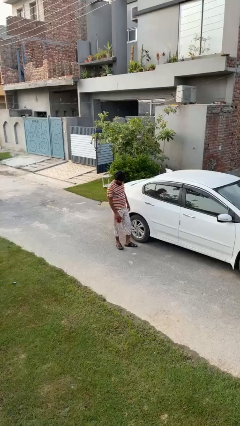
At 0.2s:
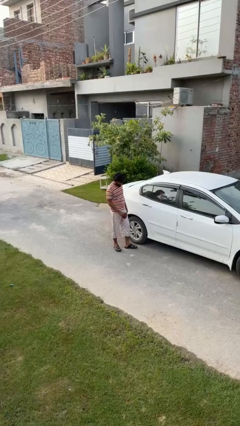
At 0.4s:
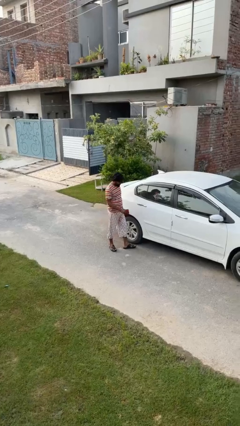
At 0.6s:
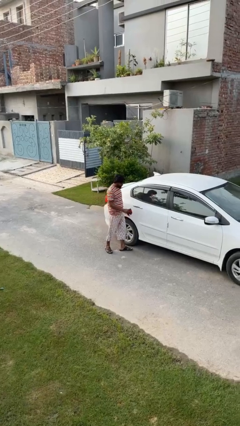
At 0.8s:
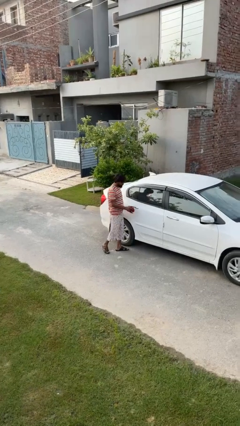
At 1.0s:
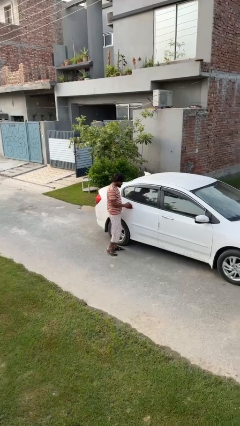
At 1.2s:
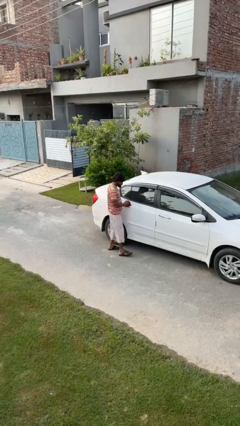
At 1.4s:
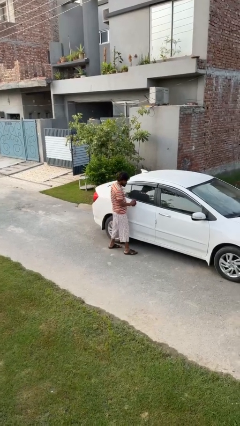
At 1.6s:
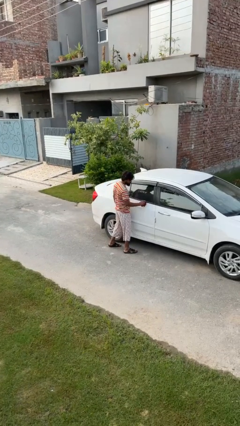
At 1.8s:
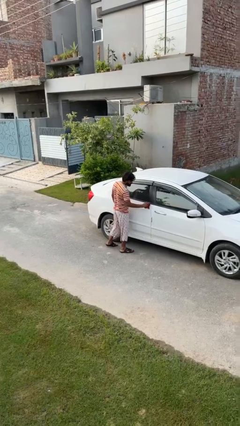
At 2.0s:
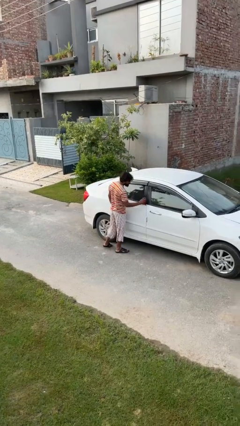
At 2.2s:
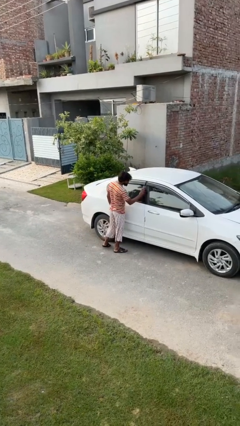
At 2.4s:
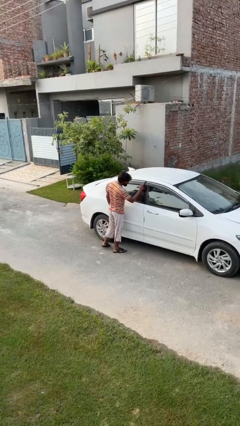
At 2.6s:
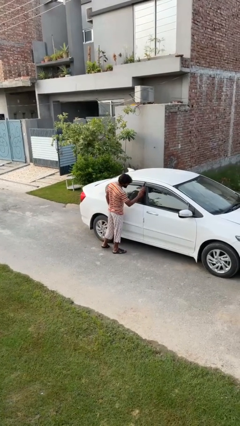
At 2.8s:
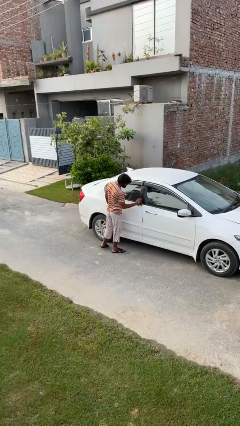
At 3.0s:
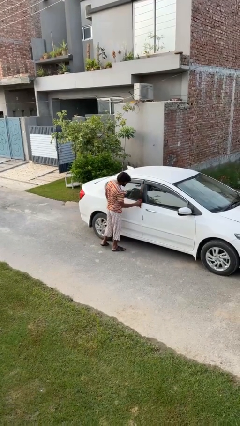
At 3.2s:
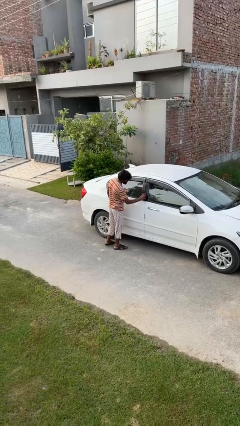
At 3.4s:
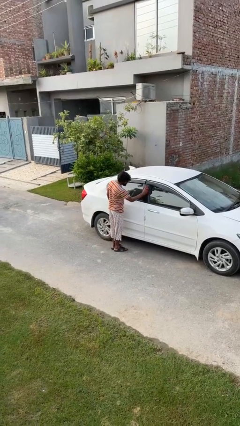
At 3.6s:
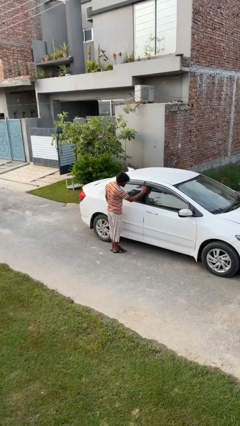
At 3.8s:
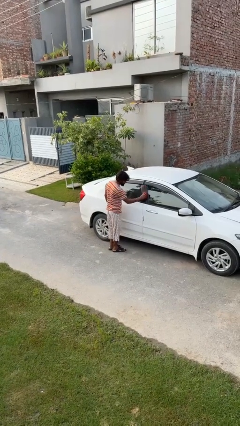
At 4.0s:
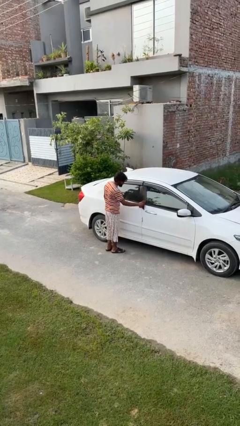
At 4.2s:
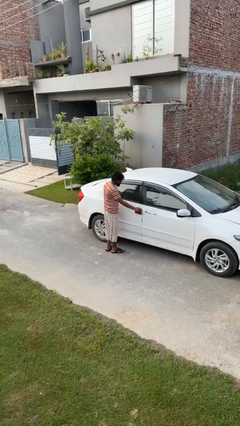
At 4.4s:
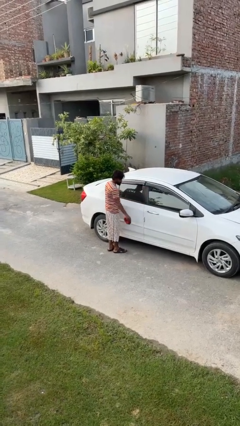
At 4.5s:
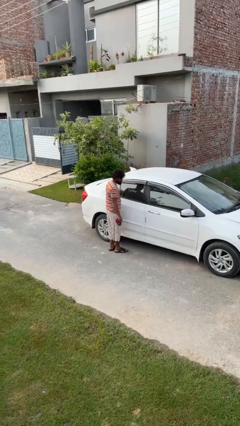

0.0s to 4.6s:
person polishes car with rag

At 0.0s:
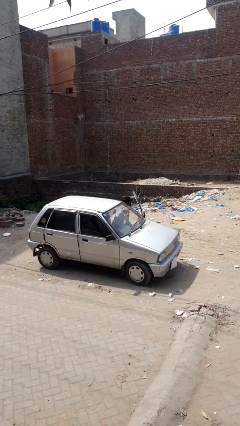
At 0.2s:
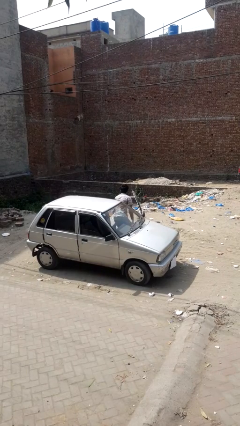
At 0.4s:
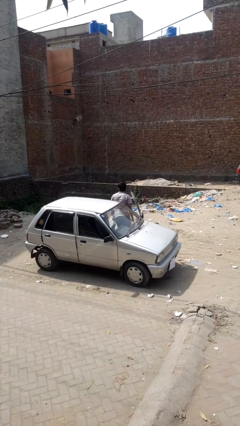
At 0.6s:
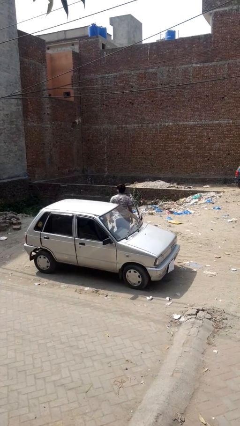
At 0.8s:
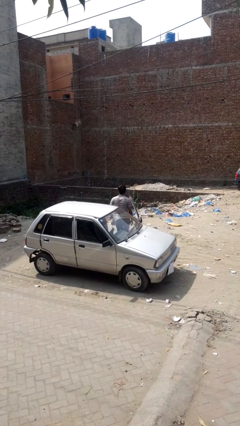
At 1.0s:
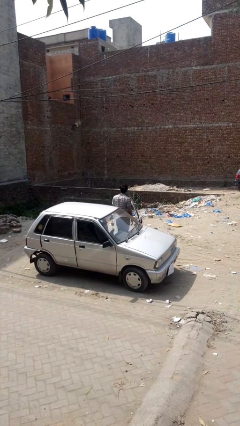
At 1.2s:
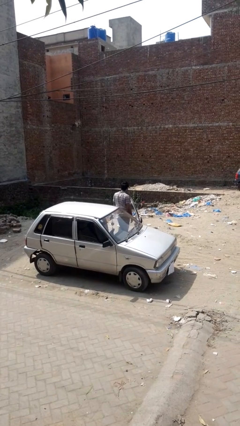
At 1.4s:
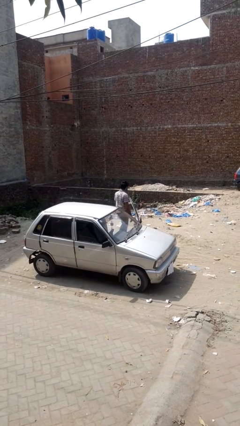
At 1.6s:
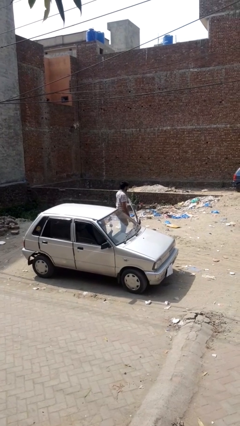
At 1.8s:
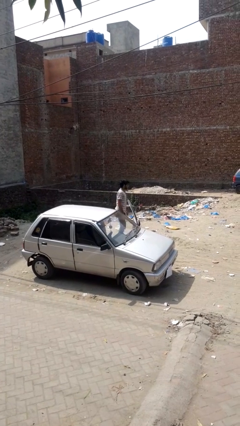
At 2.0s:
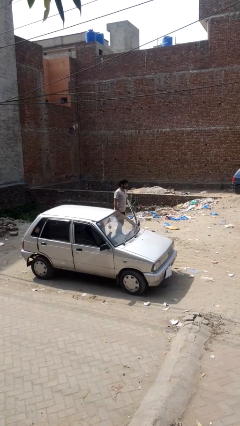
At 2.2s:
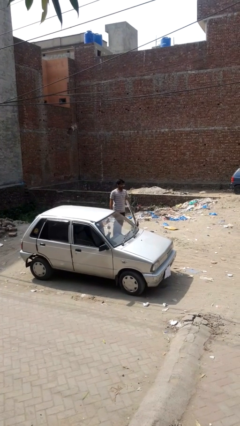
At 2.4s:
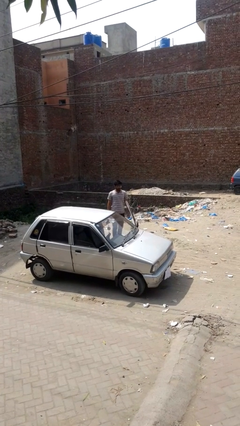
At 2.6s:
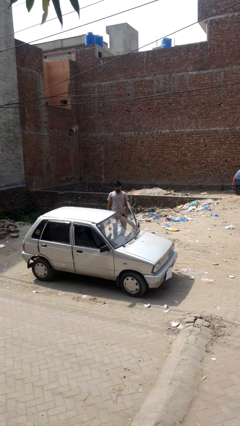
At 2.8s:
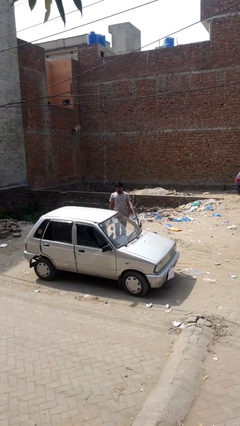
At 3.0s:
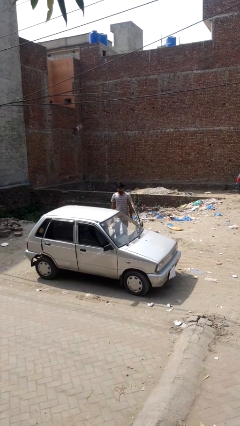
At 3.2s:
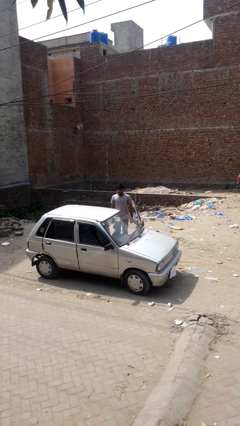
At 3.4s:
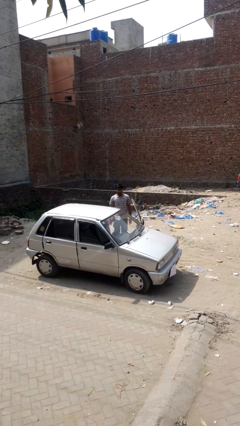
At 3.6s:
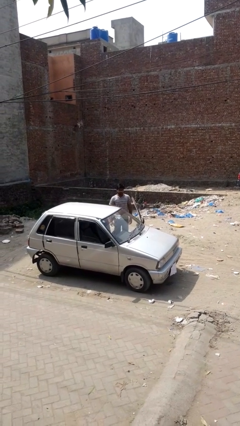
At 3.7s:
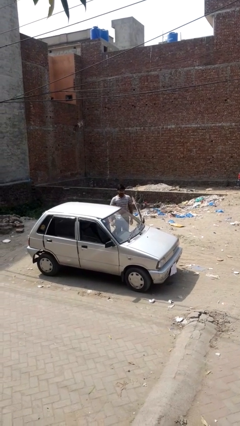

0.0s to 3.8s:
person exits car

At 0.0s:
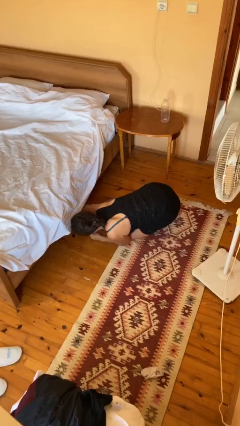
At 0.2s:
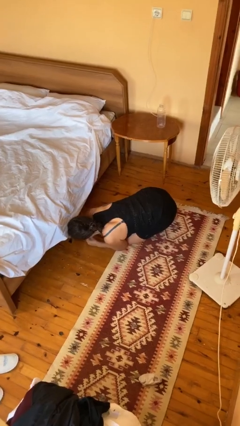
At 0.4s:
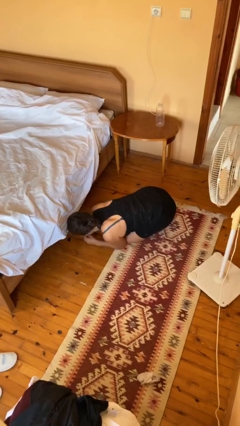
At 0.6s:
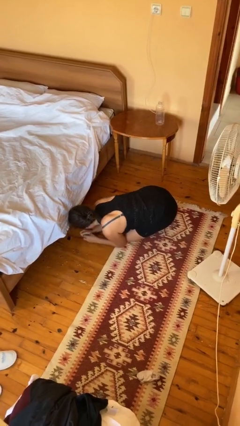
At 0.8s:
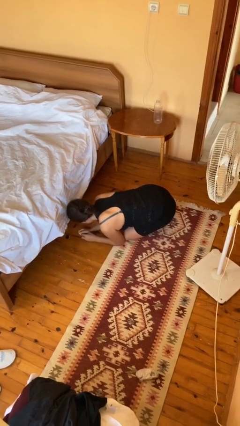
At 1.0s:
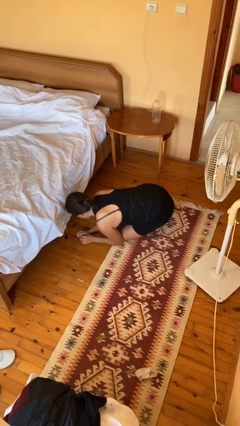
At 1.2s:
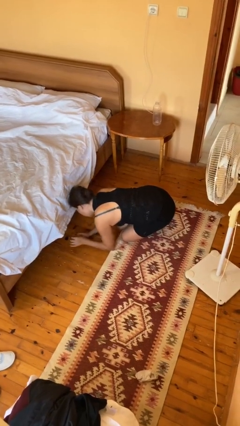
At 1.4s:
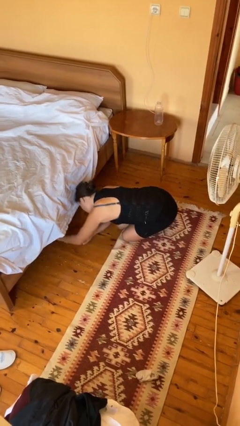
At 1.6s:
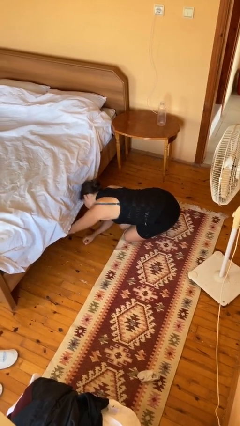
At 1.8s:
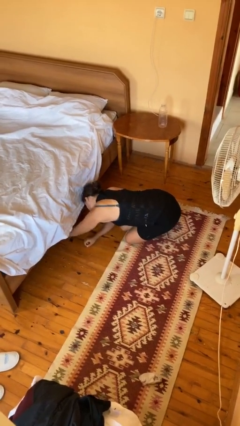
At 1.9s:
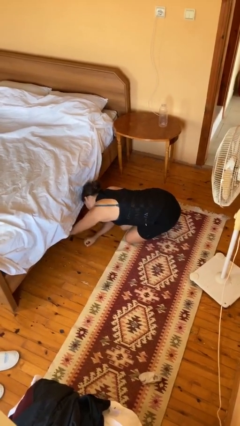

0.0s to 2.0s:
person searches under bed

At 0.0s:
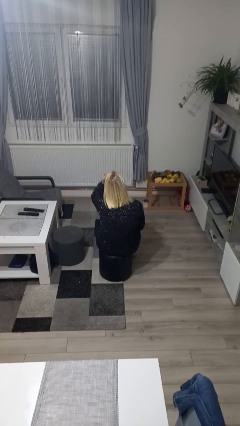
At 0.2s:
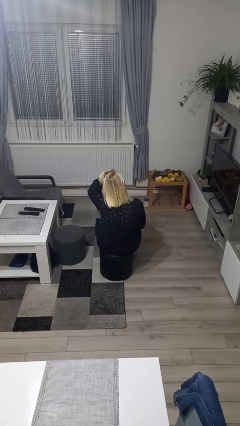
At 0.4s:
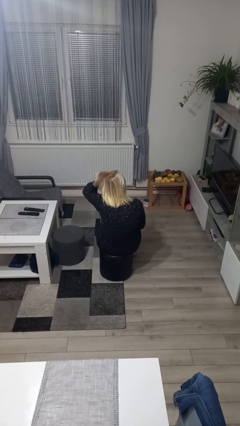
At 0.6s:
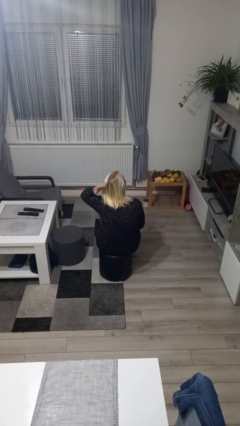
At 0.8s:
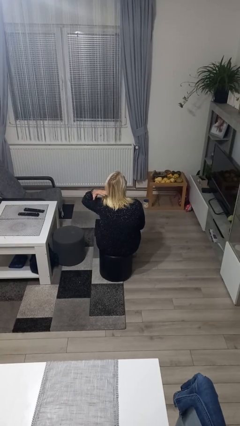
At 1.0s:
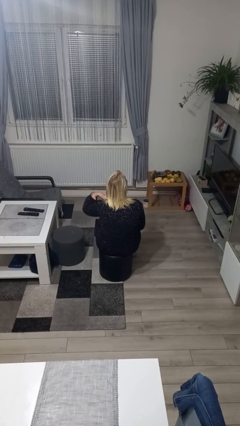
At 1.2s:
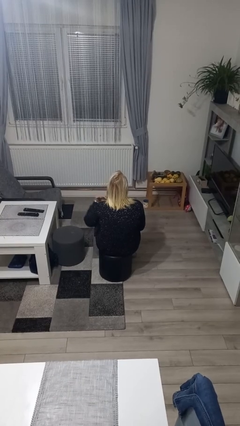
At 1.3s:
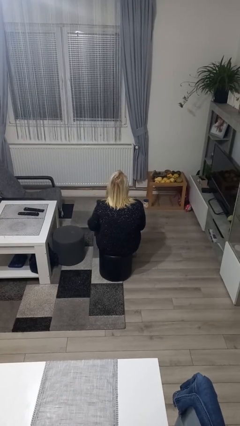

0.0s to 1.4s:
person strokes hair

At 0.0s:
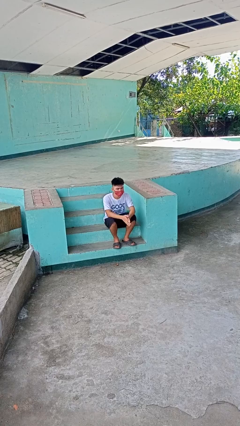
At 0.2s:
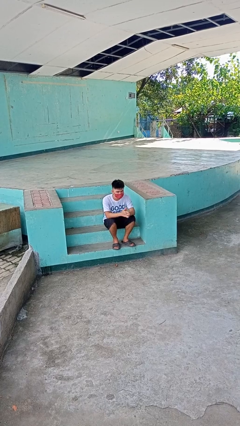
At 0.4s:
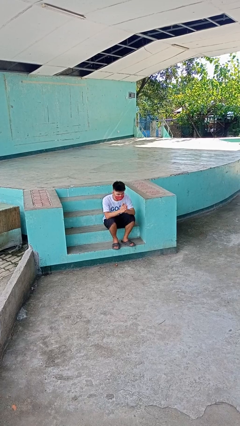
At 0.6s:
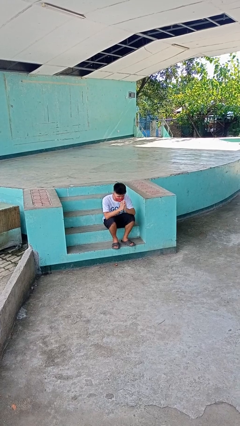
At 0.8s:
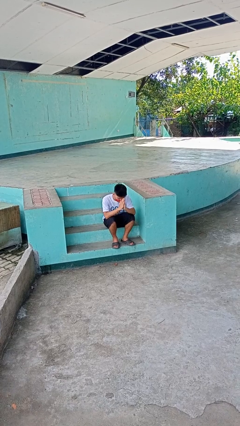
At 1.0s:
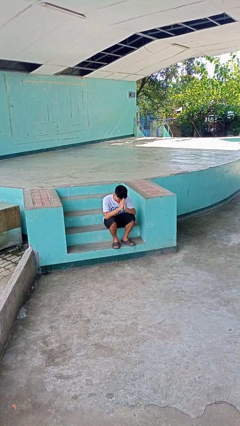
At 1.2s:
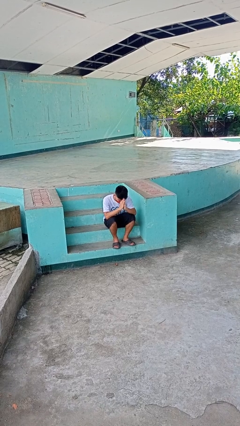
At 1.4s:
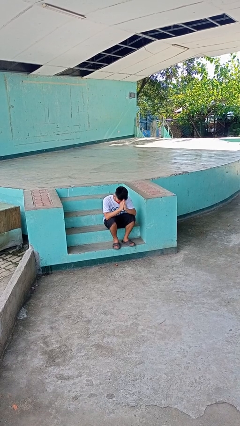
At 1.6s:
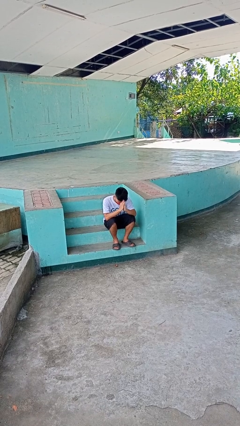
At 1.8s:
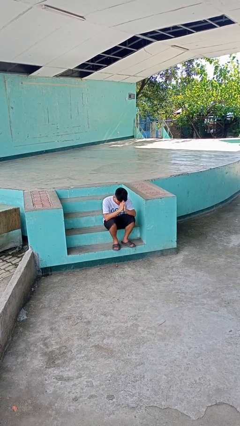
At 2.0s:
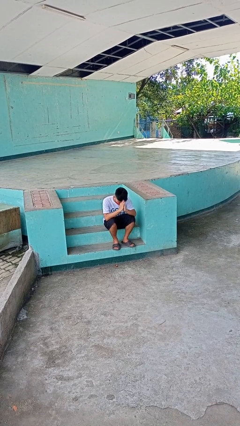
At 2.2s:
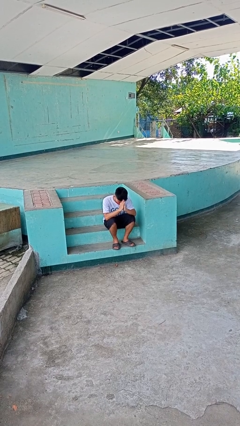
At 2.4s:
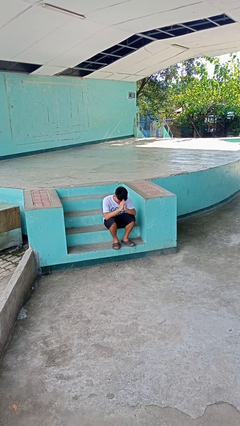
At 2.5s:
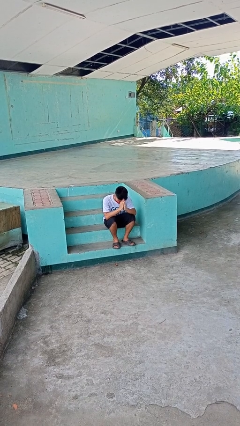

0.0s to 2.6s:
person prays

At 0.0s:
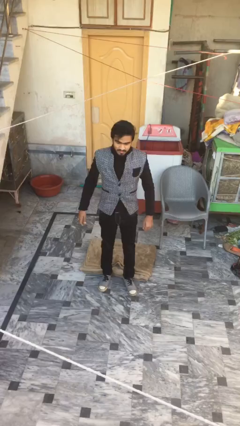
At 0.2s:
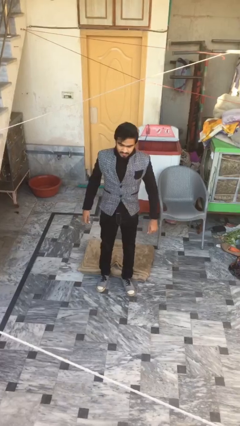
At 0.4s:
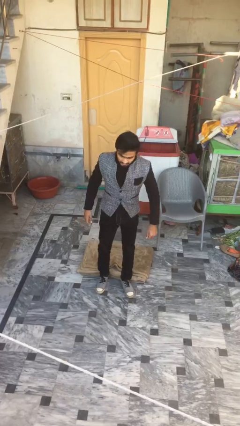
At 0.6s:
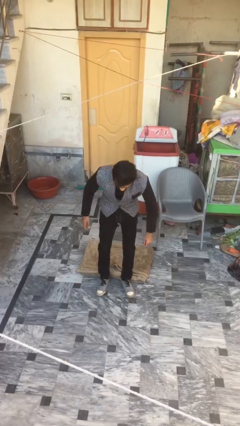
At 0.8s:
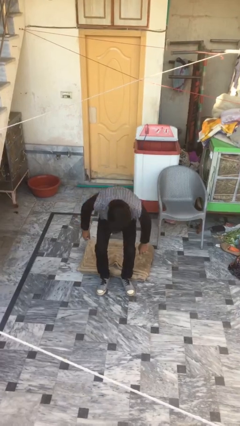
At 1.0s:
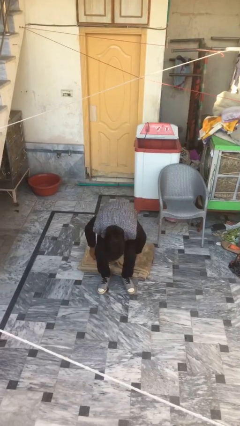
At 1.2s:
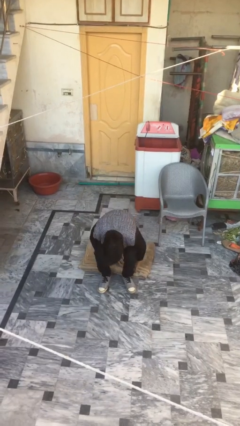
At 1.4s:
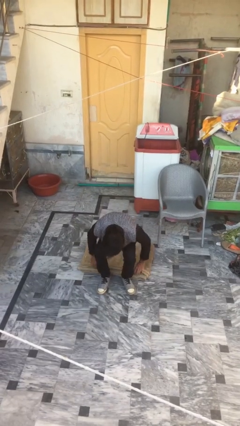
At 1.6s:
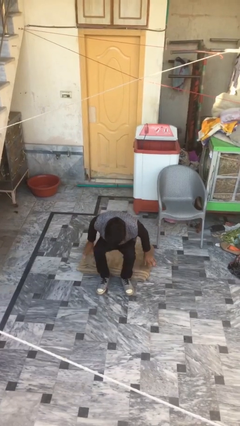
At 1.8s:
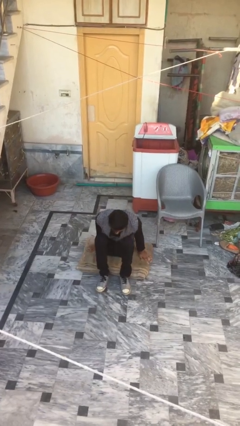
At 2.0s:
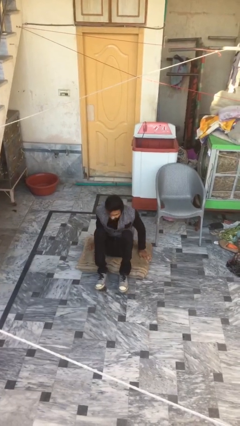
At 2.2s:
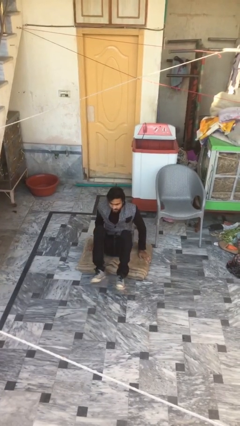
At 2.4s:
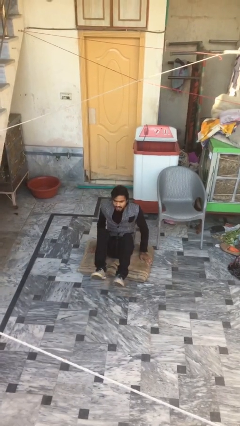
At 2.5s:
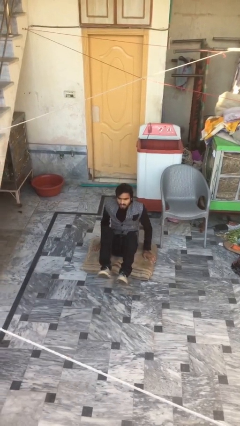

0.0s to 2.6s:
person sits down

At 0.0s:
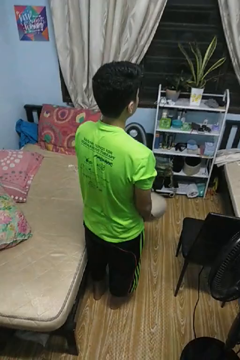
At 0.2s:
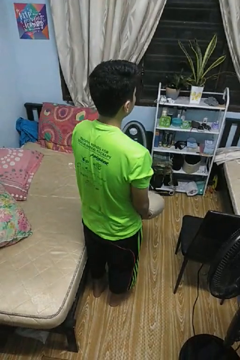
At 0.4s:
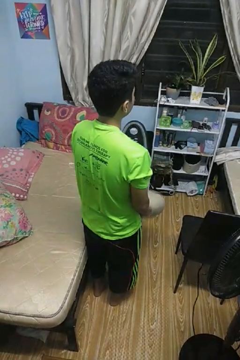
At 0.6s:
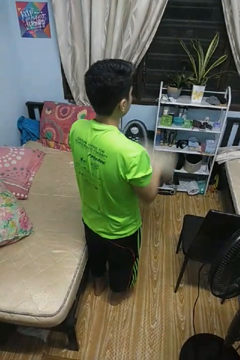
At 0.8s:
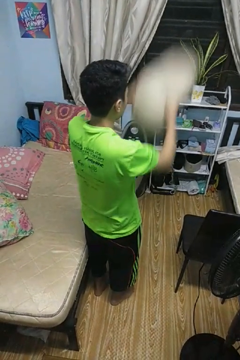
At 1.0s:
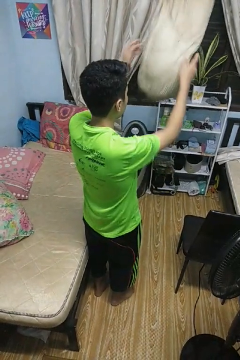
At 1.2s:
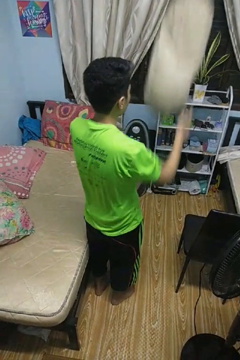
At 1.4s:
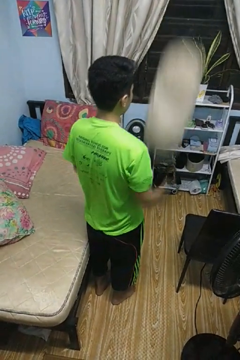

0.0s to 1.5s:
person throws object into air
